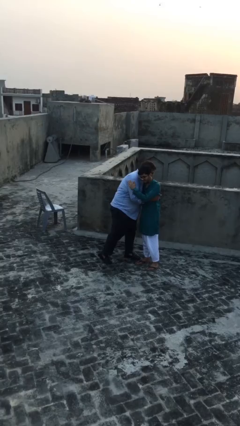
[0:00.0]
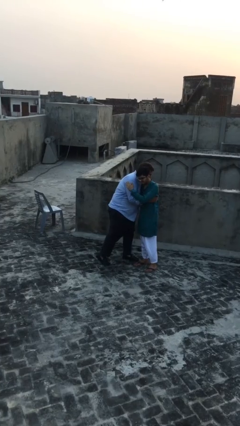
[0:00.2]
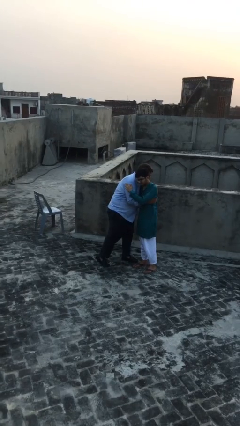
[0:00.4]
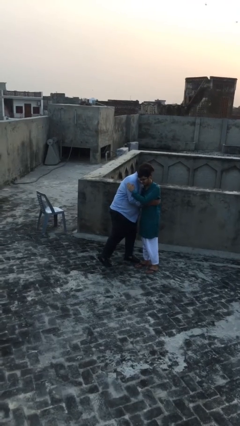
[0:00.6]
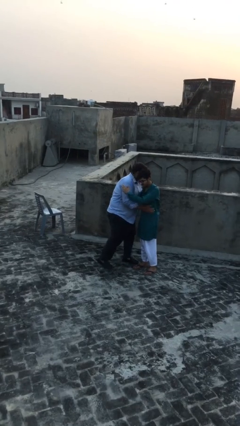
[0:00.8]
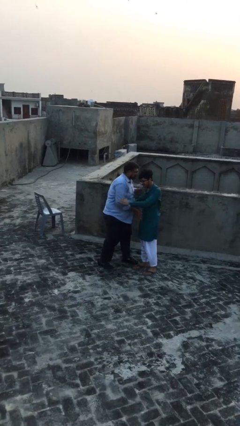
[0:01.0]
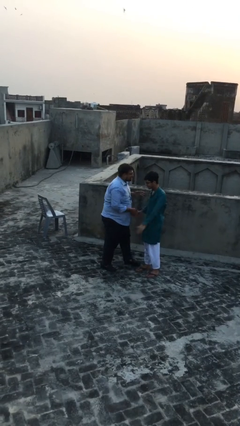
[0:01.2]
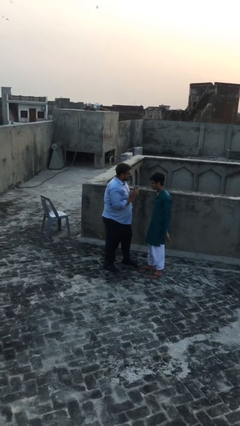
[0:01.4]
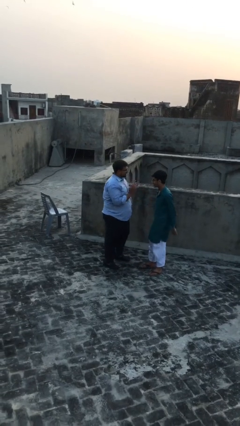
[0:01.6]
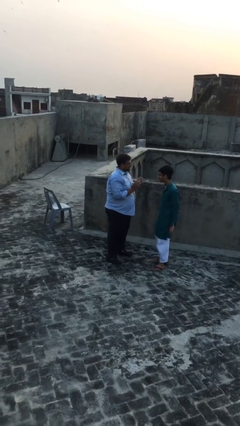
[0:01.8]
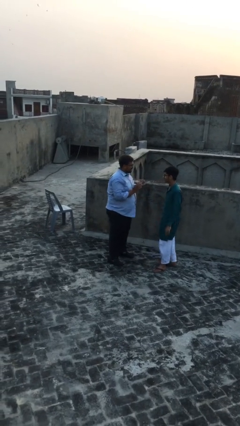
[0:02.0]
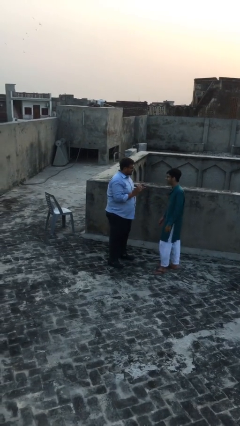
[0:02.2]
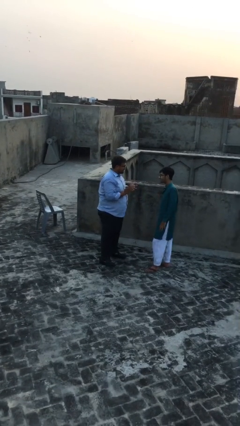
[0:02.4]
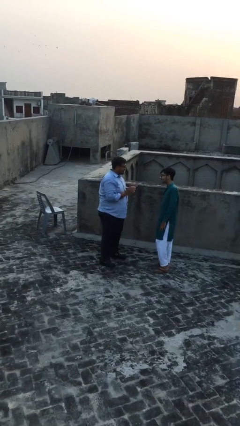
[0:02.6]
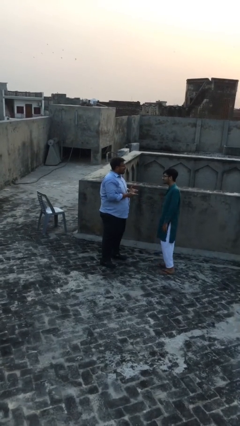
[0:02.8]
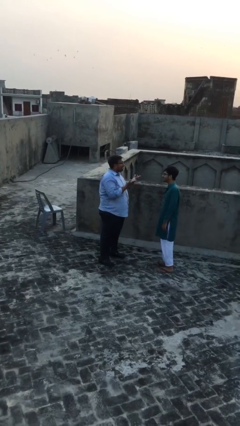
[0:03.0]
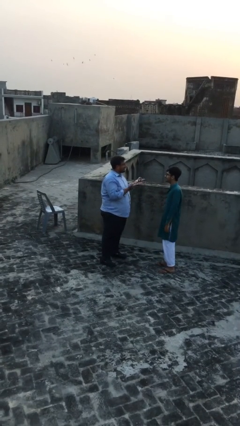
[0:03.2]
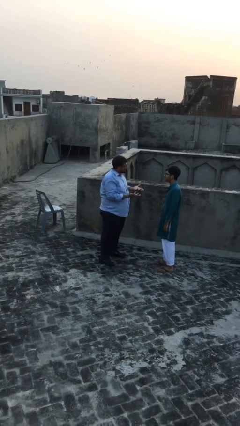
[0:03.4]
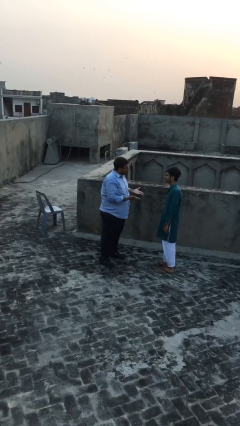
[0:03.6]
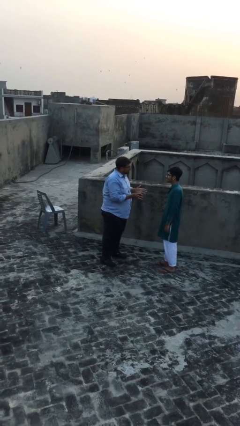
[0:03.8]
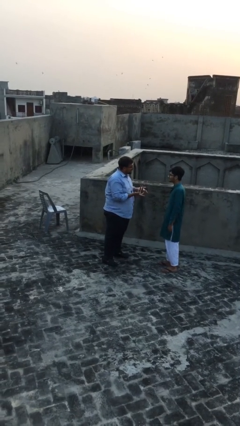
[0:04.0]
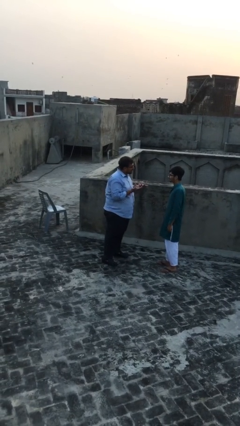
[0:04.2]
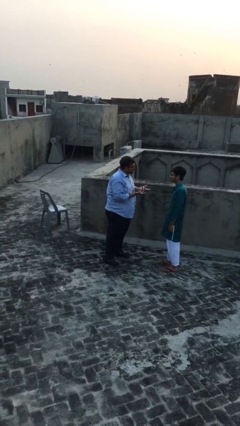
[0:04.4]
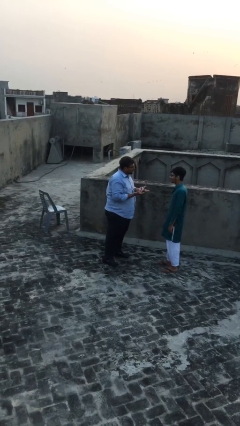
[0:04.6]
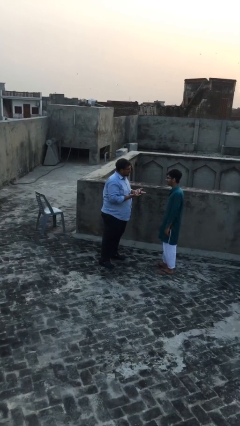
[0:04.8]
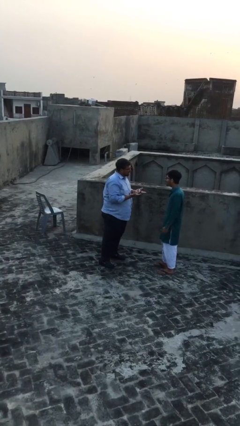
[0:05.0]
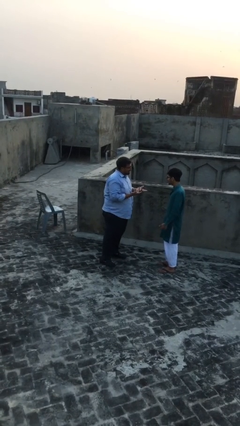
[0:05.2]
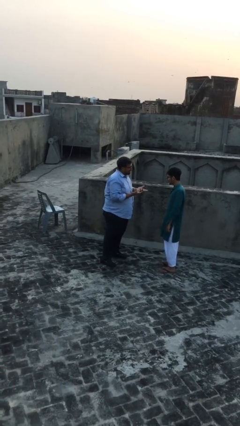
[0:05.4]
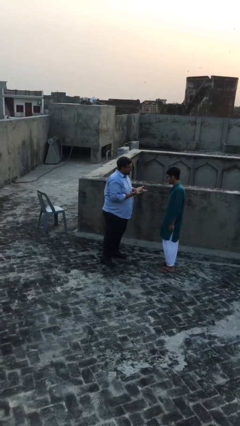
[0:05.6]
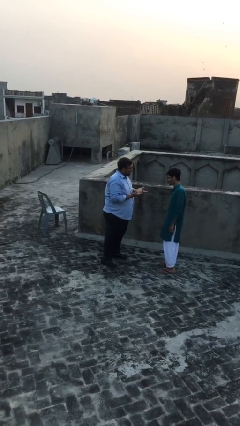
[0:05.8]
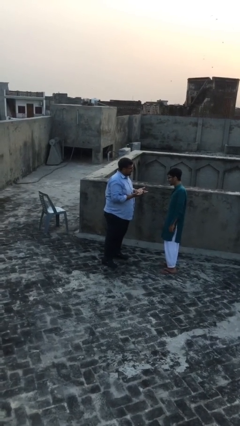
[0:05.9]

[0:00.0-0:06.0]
person talks to person

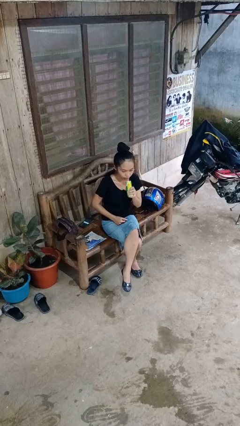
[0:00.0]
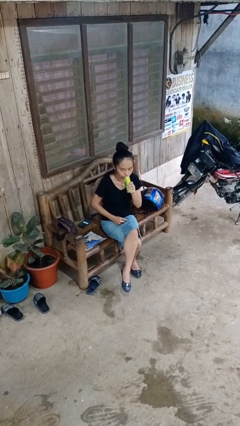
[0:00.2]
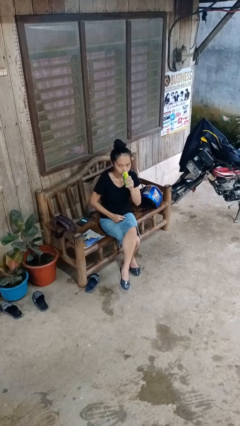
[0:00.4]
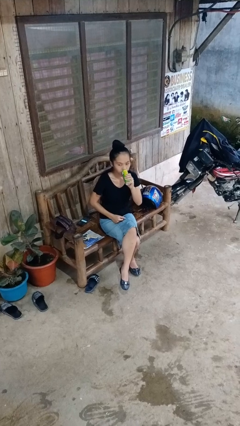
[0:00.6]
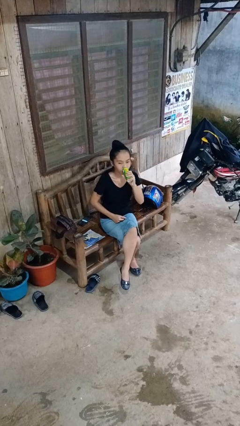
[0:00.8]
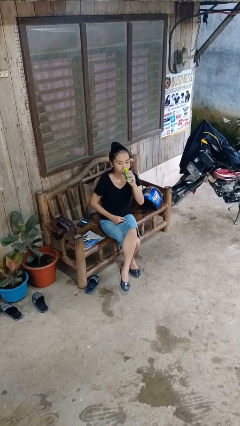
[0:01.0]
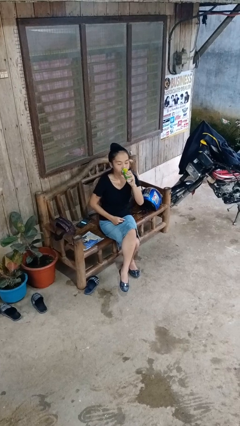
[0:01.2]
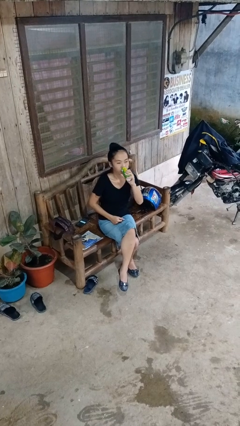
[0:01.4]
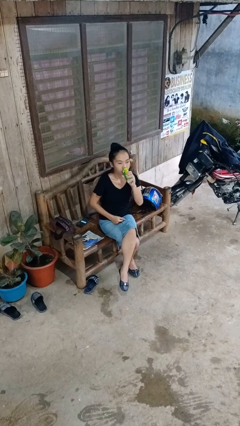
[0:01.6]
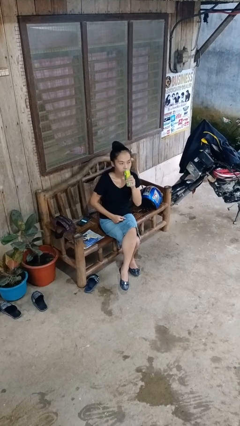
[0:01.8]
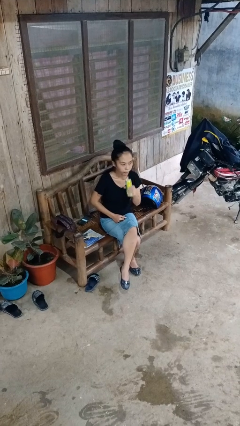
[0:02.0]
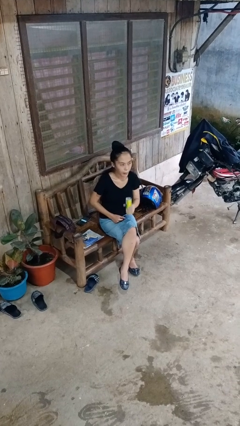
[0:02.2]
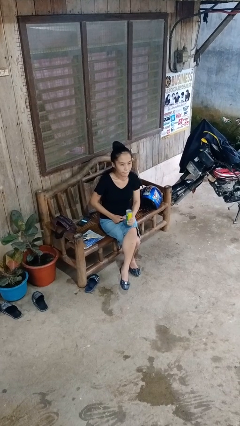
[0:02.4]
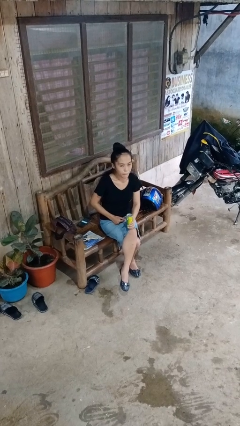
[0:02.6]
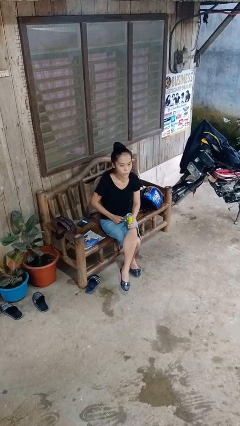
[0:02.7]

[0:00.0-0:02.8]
person drinks from beverage can

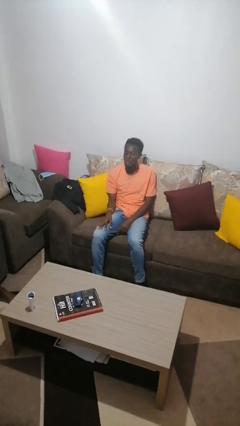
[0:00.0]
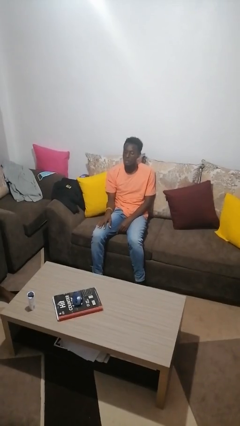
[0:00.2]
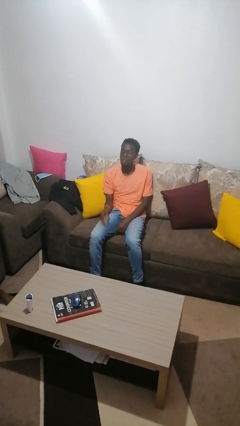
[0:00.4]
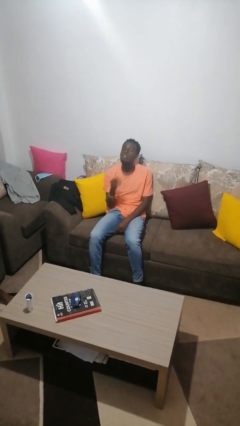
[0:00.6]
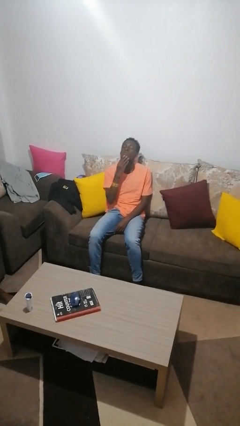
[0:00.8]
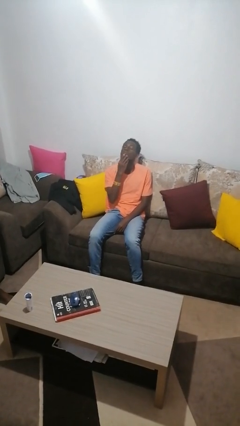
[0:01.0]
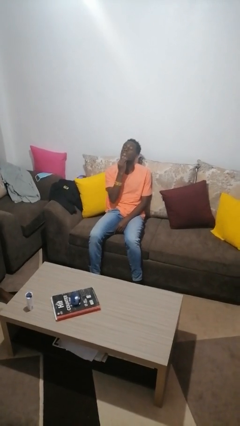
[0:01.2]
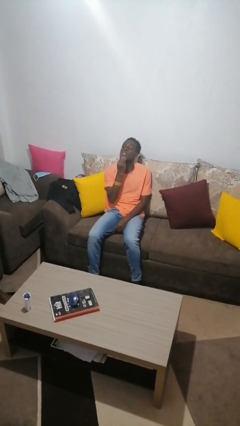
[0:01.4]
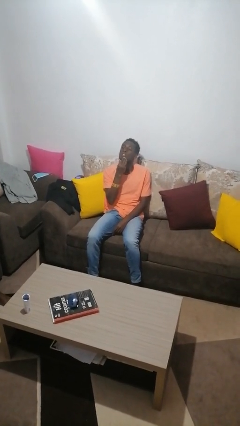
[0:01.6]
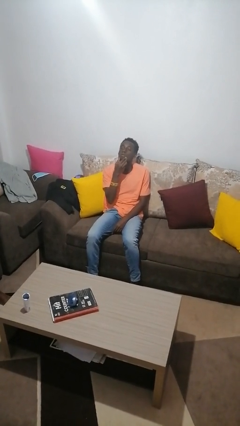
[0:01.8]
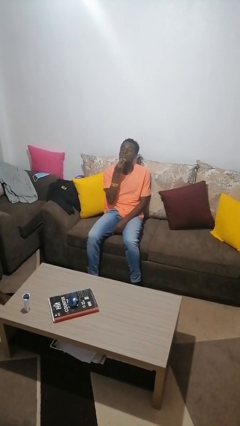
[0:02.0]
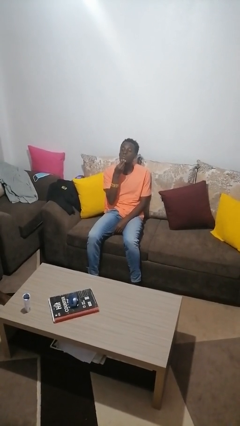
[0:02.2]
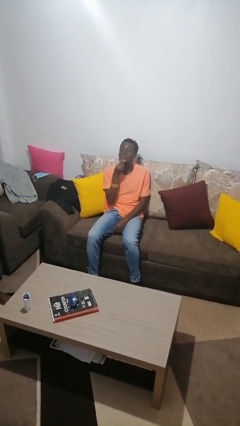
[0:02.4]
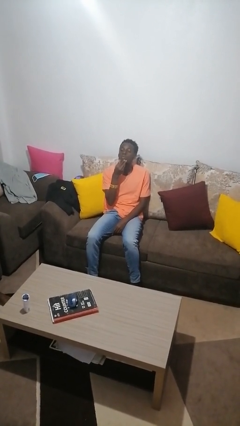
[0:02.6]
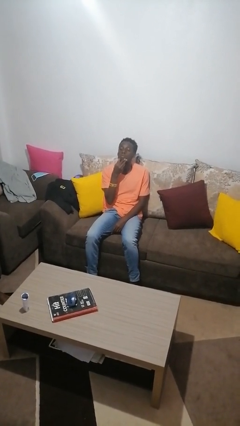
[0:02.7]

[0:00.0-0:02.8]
person strokes chin

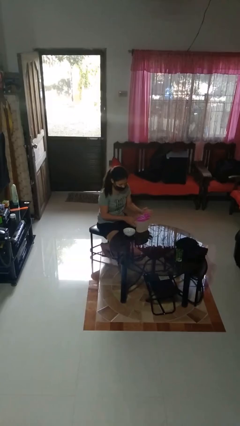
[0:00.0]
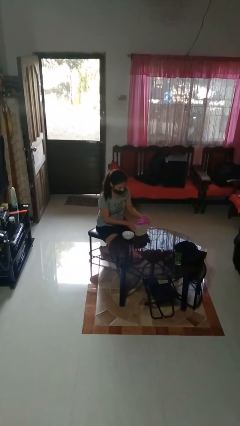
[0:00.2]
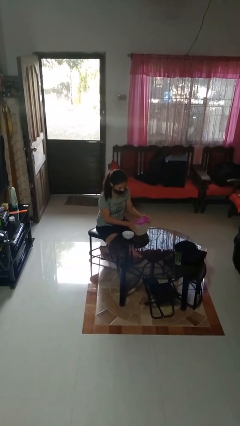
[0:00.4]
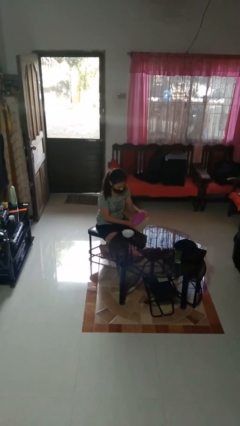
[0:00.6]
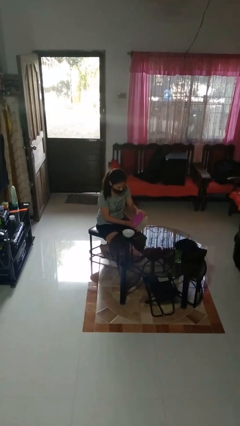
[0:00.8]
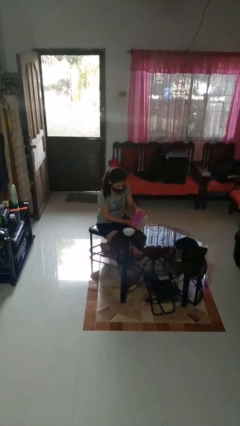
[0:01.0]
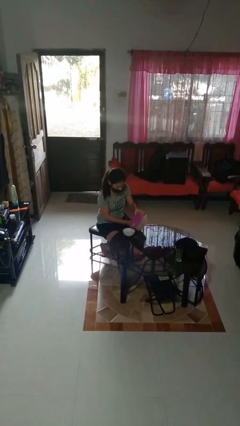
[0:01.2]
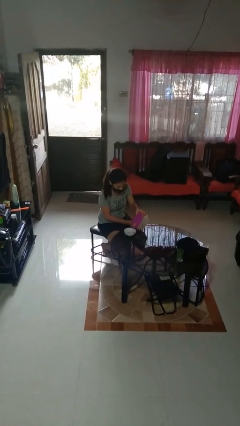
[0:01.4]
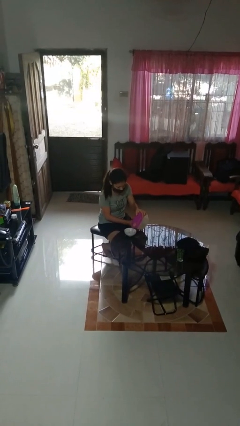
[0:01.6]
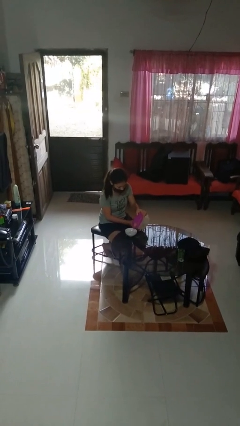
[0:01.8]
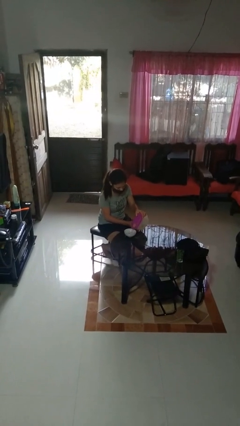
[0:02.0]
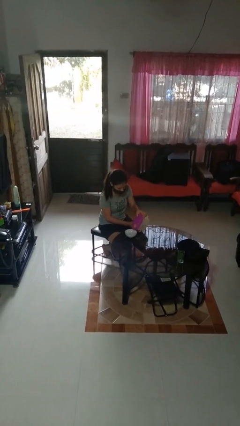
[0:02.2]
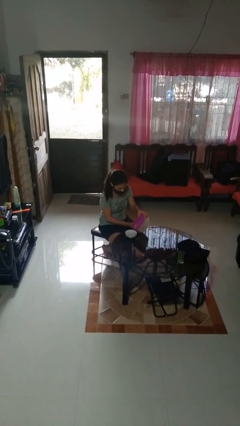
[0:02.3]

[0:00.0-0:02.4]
person pours into bowl

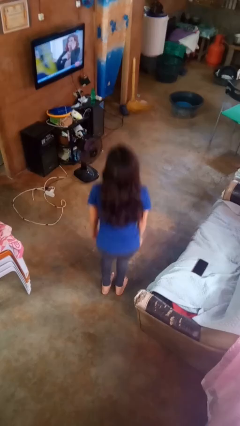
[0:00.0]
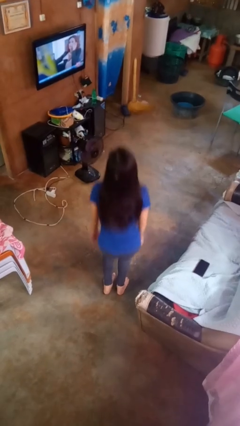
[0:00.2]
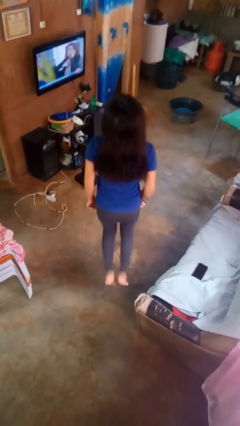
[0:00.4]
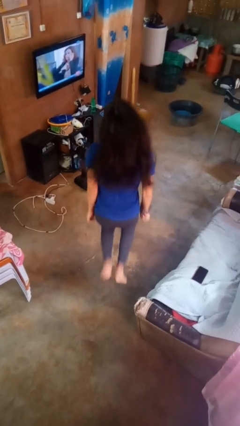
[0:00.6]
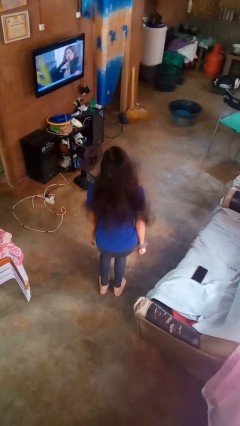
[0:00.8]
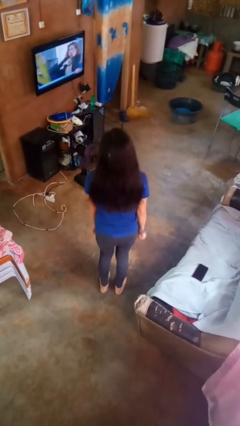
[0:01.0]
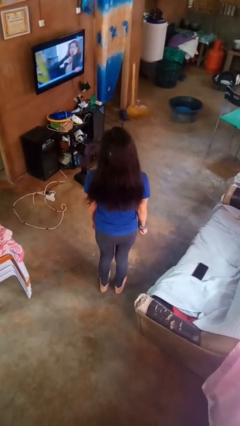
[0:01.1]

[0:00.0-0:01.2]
person jumps

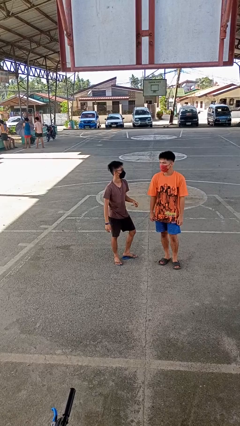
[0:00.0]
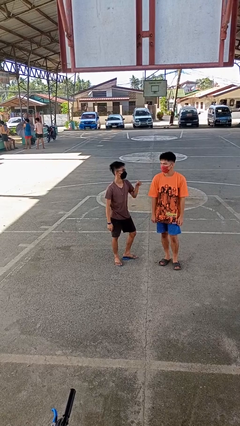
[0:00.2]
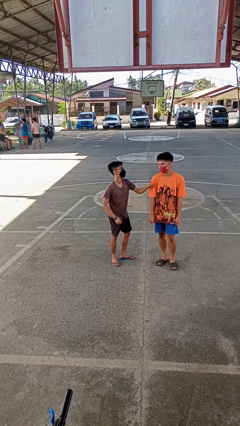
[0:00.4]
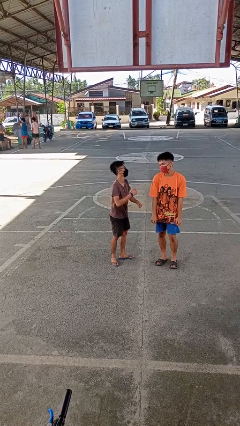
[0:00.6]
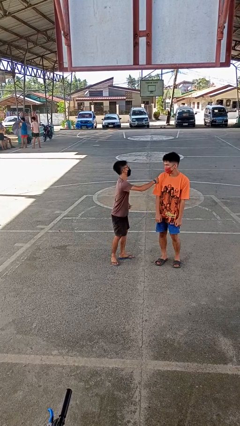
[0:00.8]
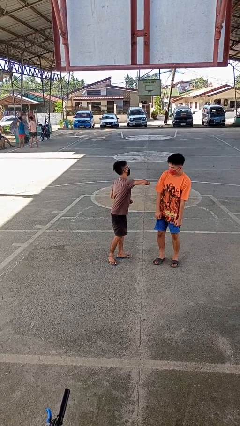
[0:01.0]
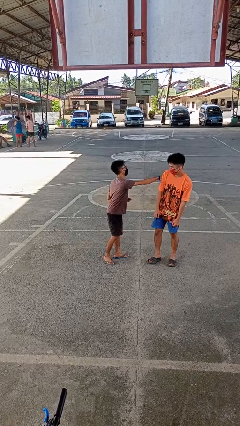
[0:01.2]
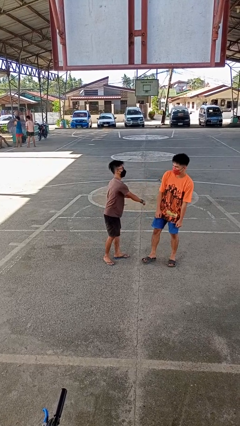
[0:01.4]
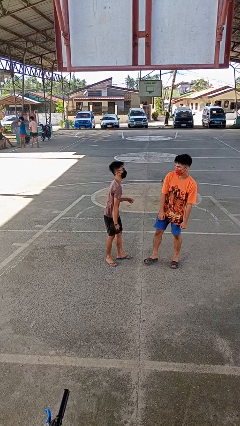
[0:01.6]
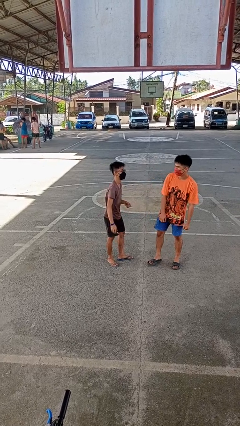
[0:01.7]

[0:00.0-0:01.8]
person pounds shoulders of person

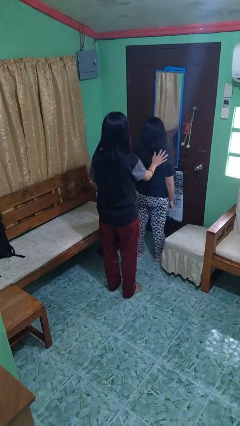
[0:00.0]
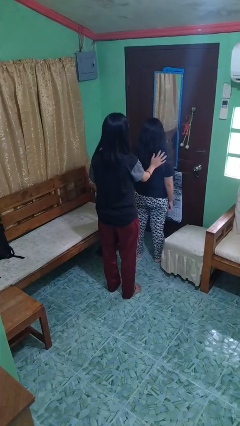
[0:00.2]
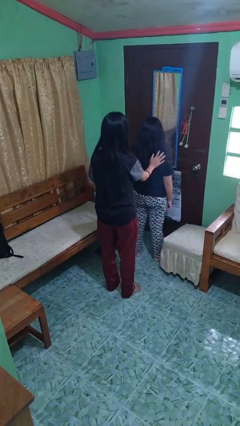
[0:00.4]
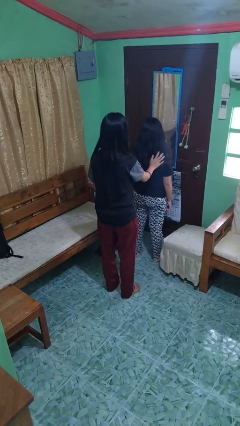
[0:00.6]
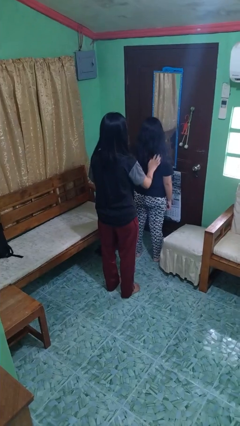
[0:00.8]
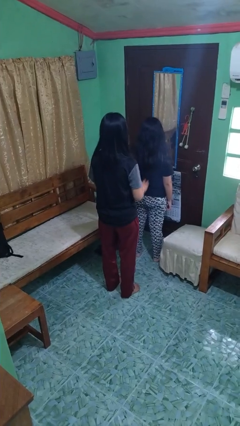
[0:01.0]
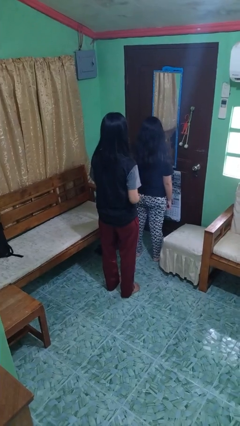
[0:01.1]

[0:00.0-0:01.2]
person touches back of person
